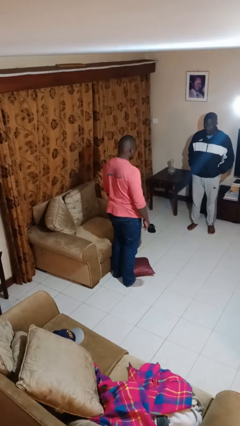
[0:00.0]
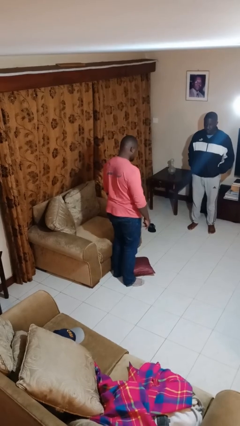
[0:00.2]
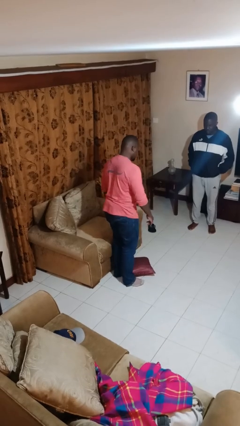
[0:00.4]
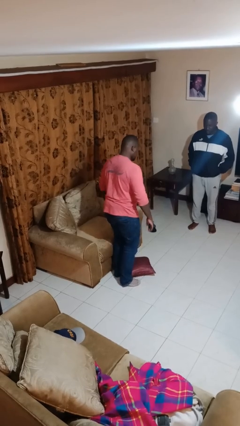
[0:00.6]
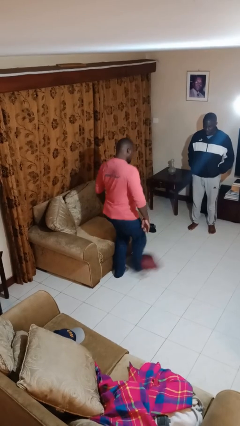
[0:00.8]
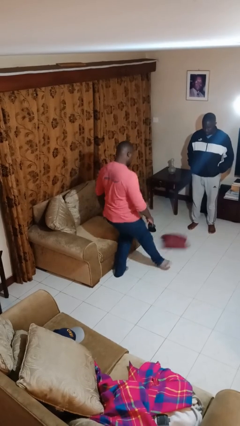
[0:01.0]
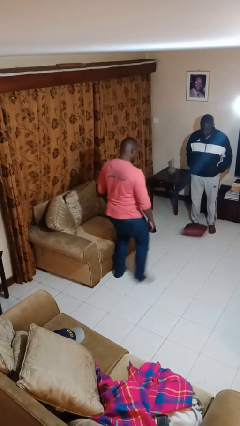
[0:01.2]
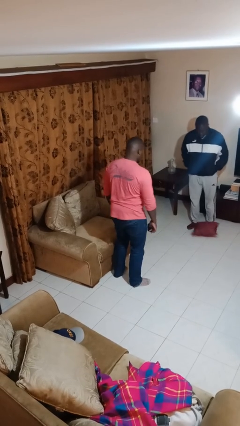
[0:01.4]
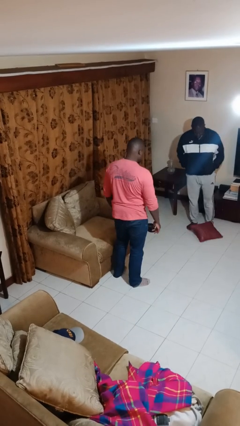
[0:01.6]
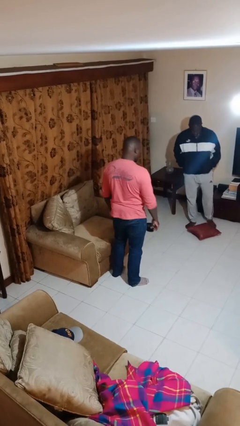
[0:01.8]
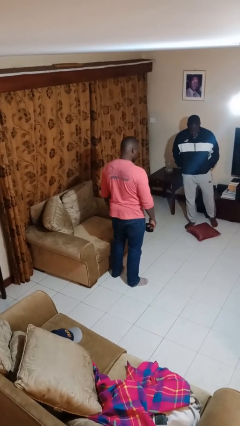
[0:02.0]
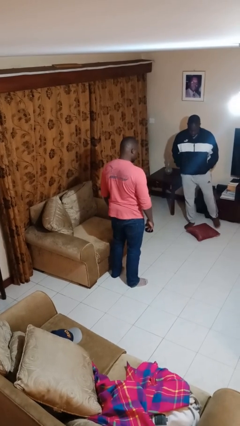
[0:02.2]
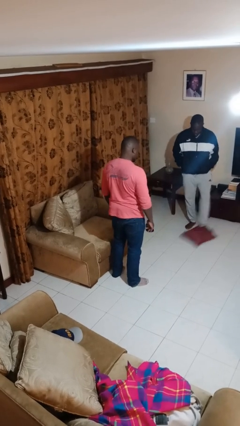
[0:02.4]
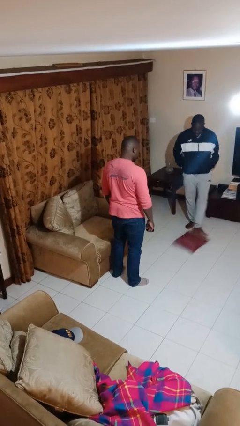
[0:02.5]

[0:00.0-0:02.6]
person kicks object to person

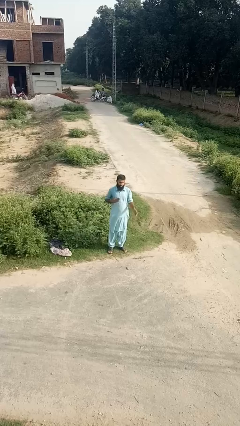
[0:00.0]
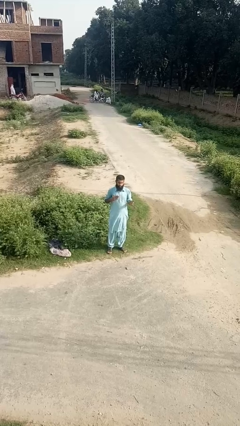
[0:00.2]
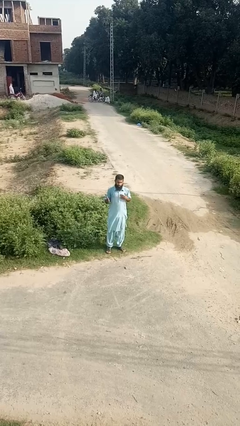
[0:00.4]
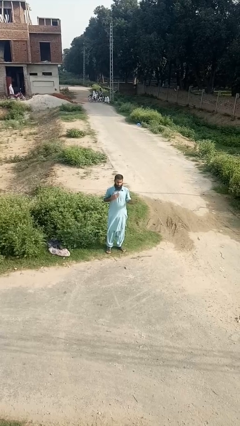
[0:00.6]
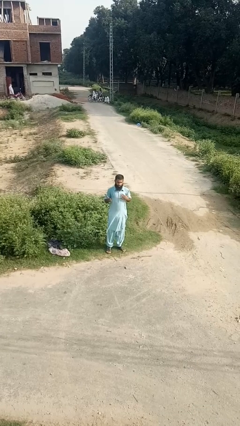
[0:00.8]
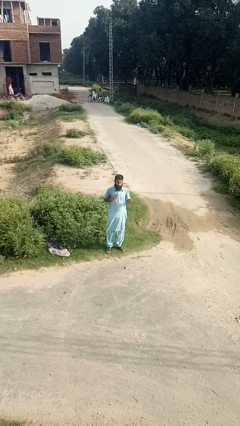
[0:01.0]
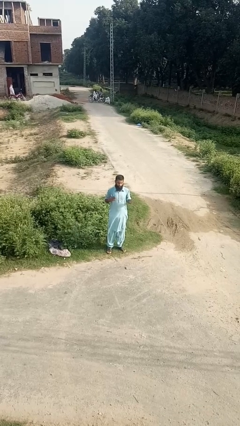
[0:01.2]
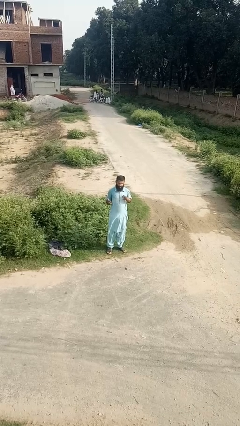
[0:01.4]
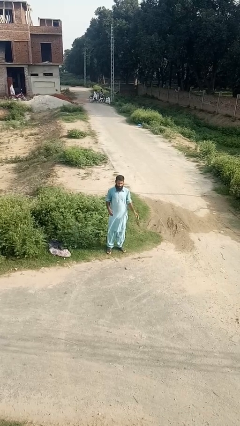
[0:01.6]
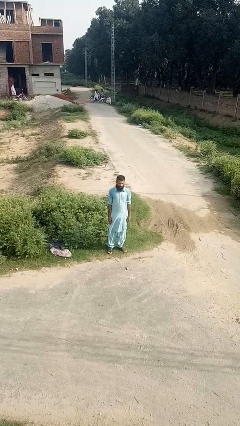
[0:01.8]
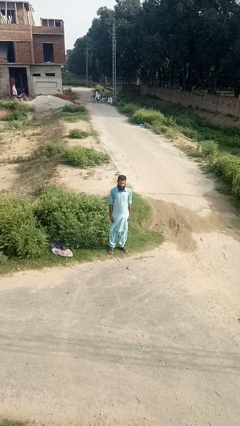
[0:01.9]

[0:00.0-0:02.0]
person drums on chest

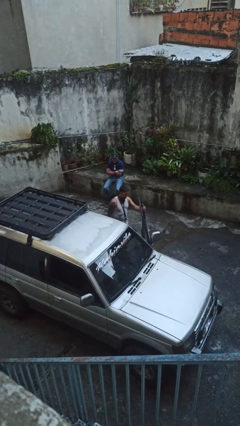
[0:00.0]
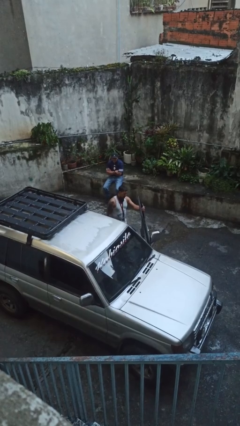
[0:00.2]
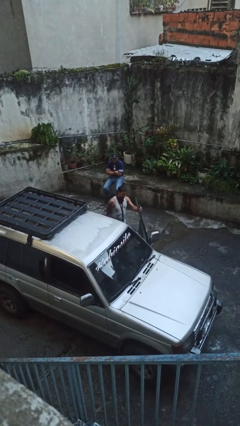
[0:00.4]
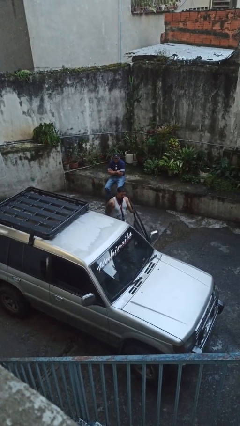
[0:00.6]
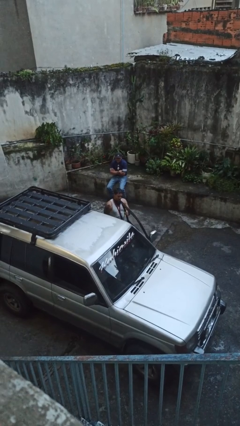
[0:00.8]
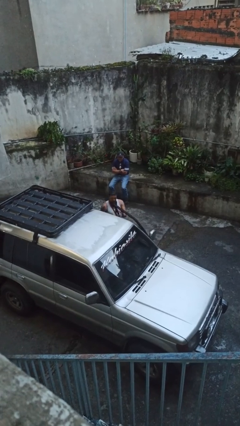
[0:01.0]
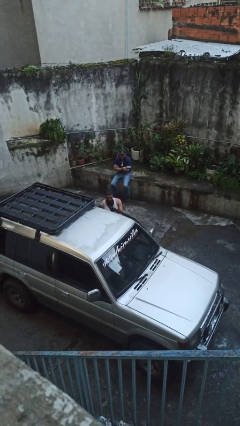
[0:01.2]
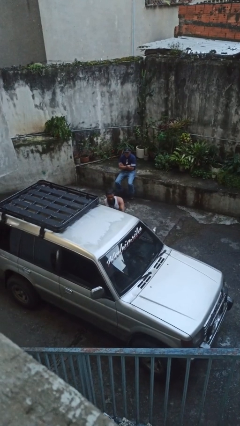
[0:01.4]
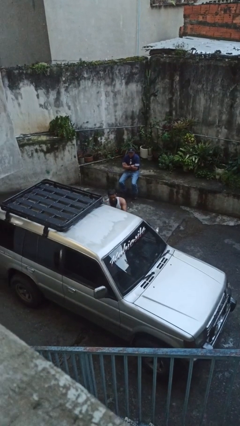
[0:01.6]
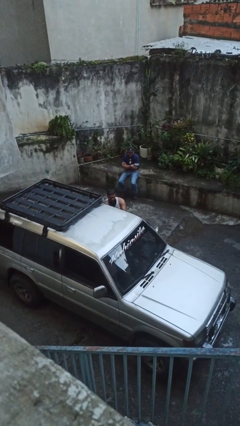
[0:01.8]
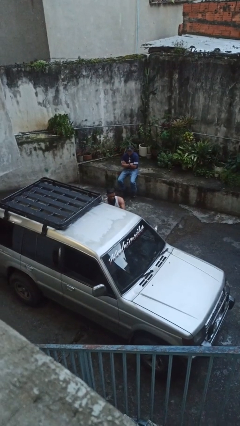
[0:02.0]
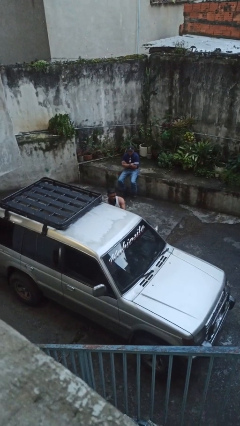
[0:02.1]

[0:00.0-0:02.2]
person closes car door

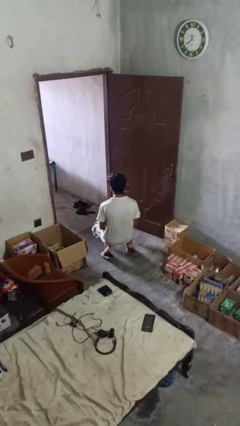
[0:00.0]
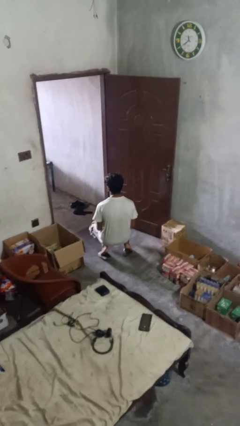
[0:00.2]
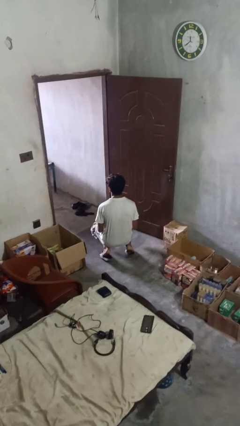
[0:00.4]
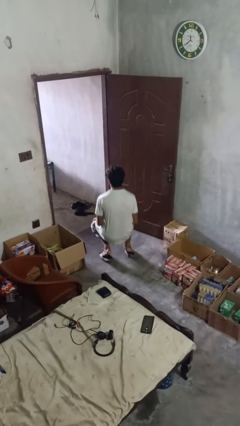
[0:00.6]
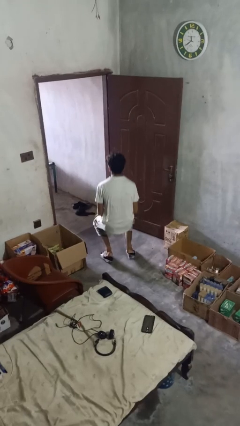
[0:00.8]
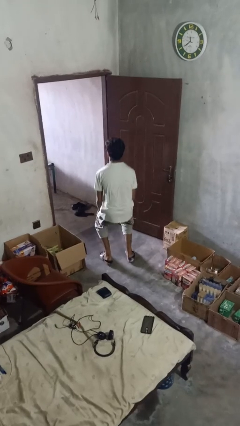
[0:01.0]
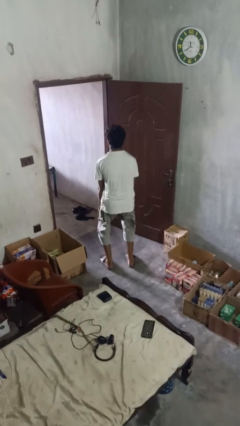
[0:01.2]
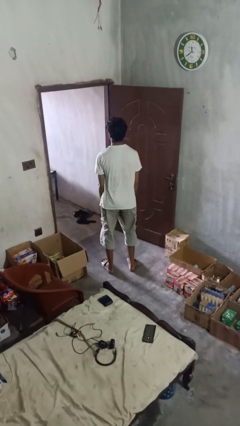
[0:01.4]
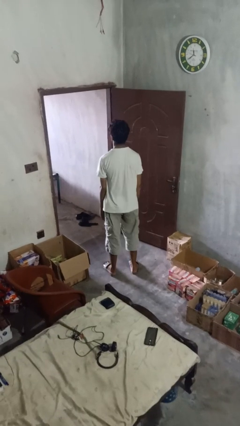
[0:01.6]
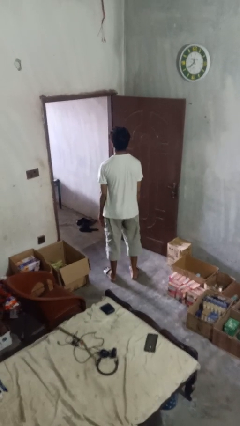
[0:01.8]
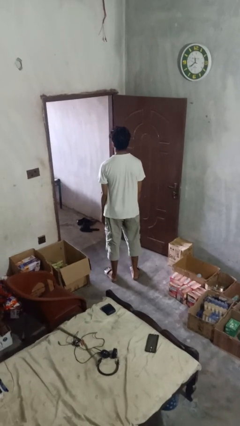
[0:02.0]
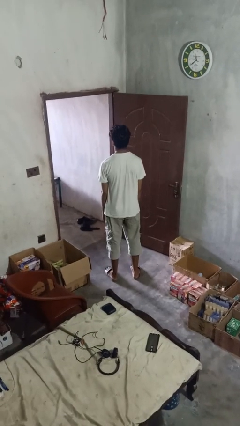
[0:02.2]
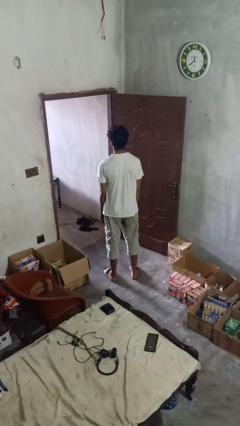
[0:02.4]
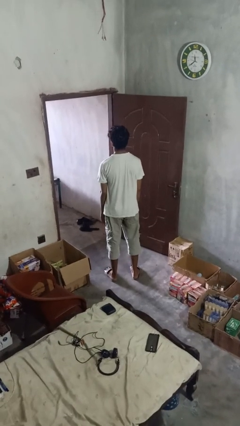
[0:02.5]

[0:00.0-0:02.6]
person stands up from floor

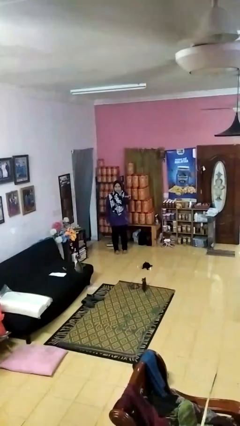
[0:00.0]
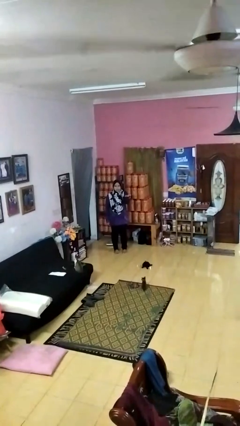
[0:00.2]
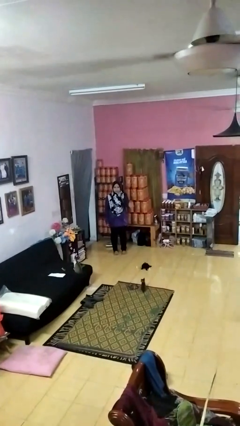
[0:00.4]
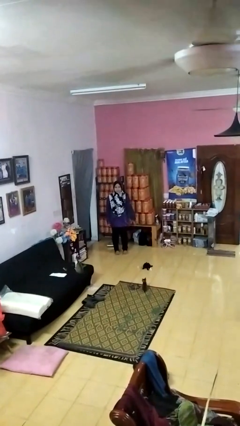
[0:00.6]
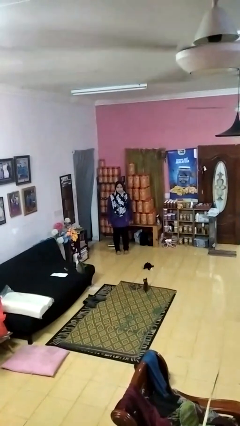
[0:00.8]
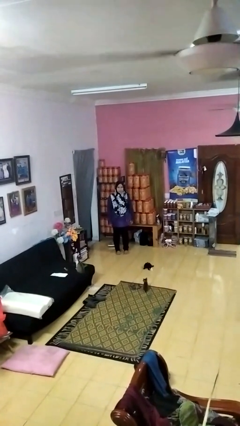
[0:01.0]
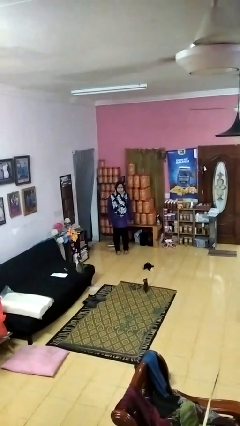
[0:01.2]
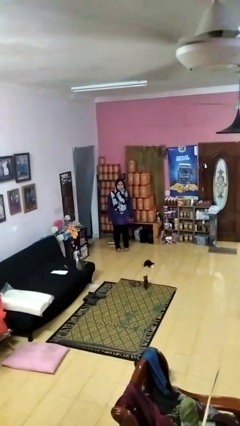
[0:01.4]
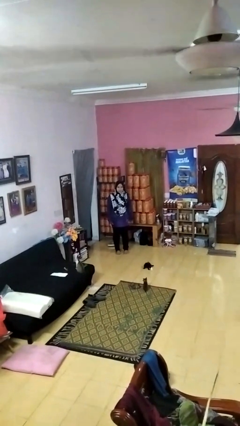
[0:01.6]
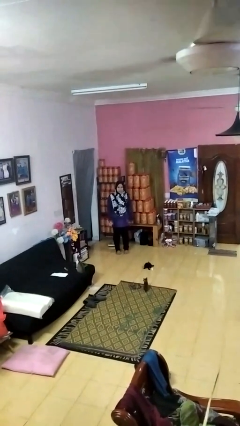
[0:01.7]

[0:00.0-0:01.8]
person gestures blow kiss

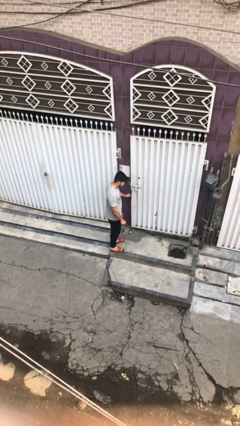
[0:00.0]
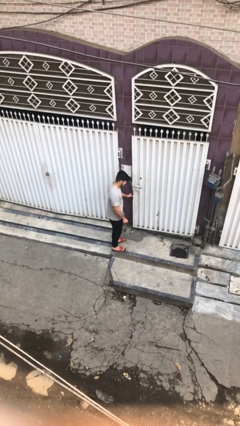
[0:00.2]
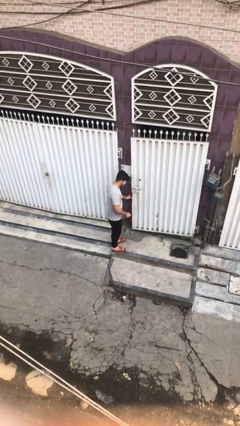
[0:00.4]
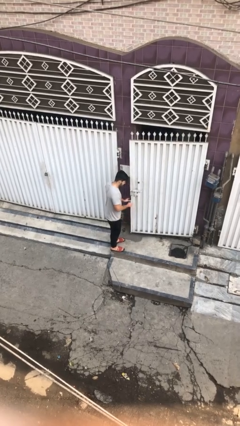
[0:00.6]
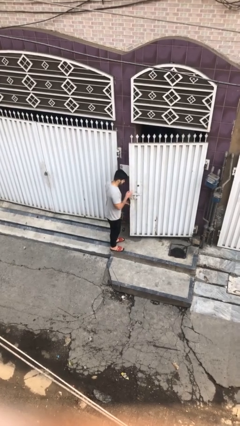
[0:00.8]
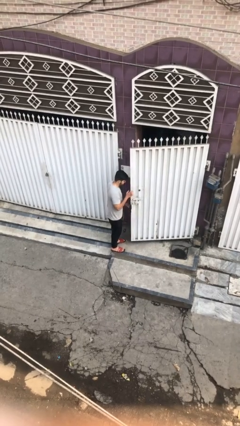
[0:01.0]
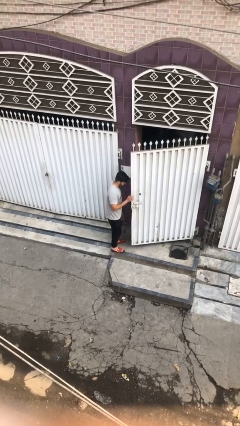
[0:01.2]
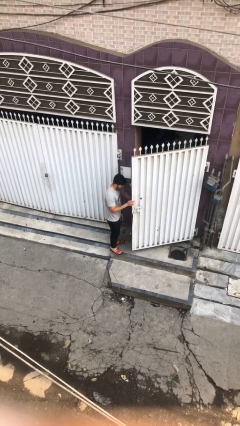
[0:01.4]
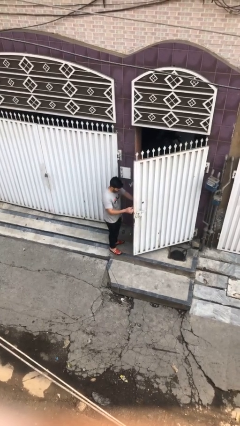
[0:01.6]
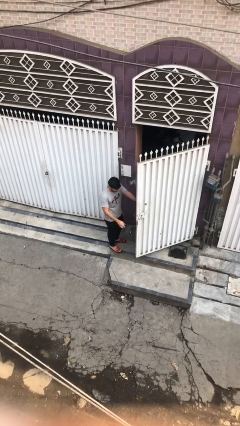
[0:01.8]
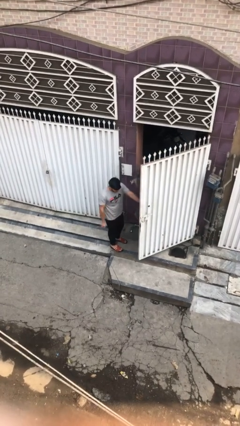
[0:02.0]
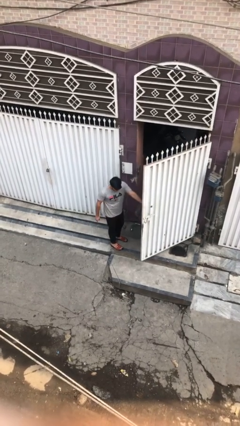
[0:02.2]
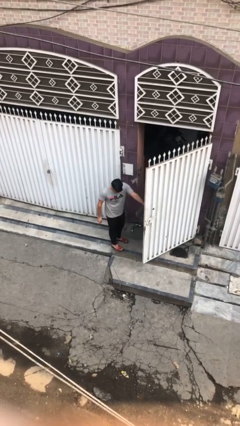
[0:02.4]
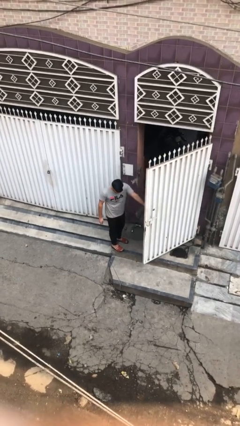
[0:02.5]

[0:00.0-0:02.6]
person opens facility door

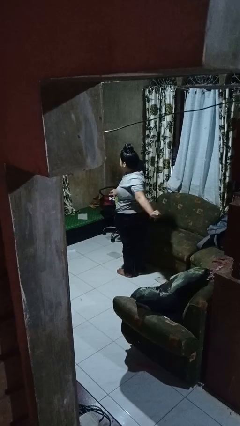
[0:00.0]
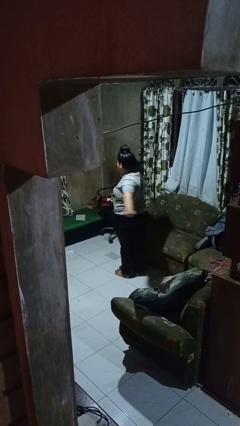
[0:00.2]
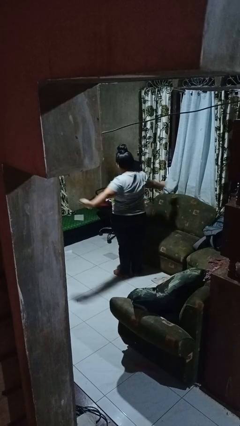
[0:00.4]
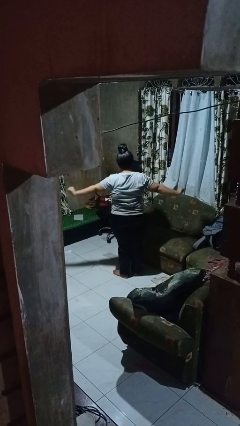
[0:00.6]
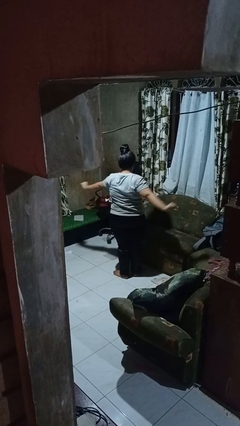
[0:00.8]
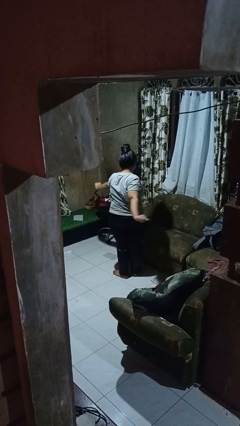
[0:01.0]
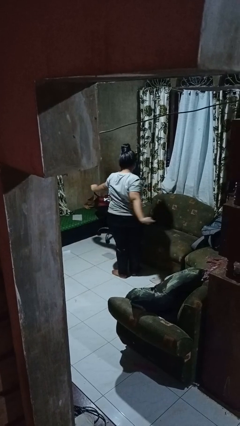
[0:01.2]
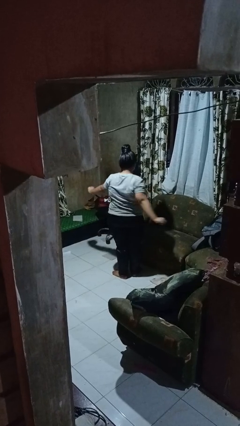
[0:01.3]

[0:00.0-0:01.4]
person stretches arms to side

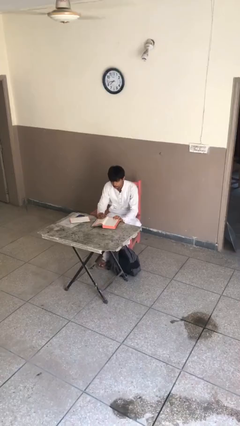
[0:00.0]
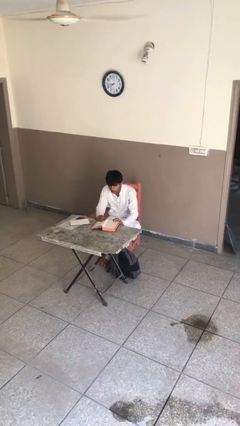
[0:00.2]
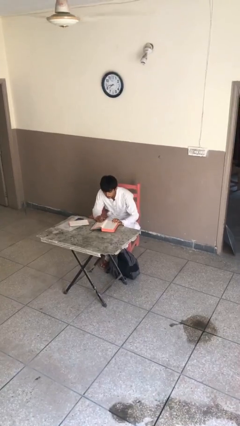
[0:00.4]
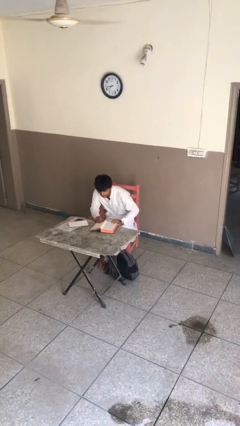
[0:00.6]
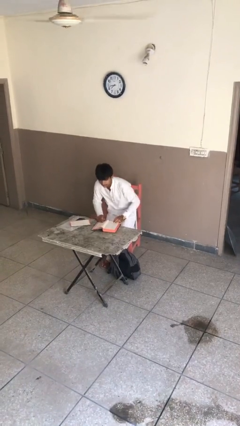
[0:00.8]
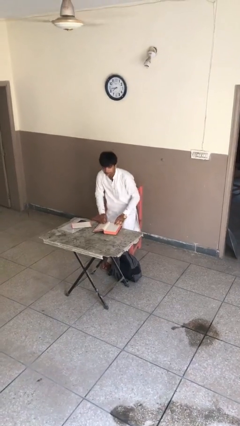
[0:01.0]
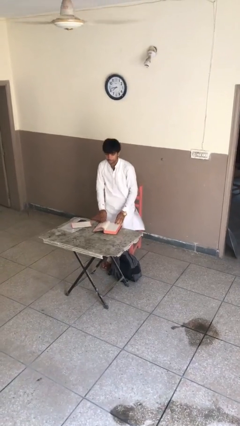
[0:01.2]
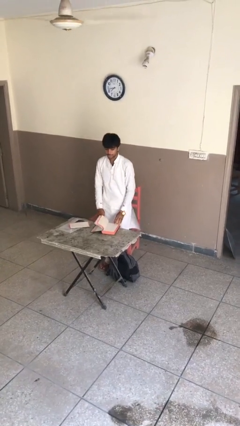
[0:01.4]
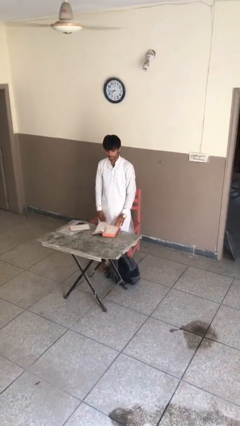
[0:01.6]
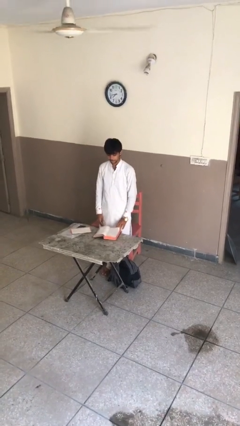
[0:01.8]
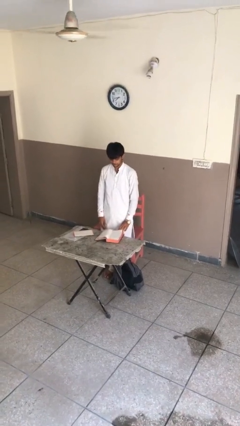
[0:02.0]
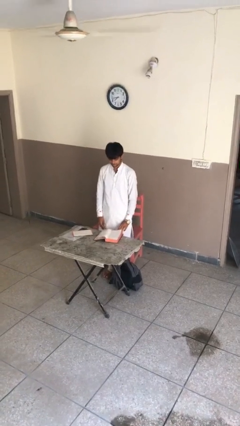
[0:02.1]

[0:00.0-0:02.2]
person stands up
